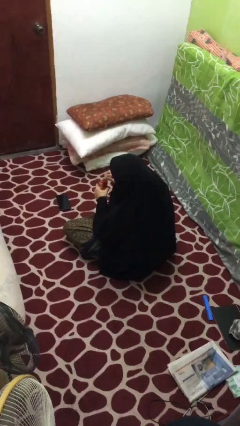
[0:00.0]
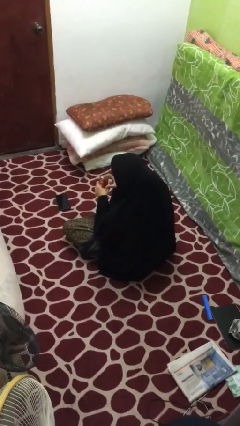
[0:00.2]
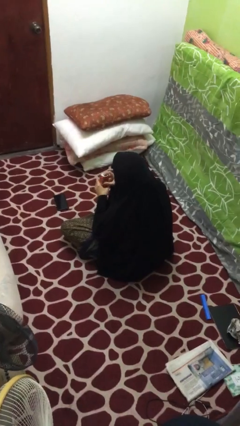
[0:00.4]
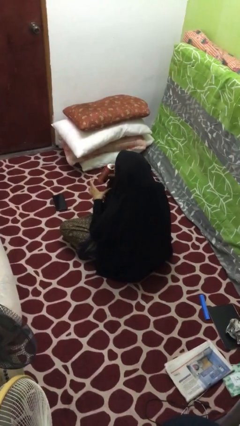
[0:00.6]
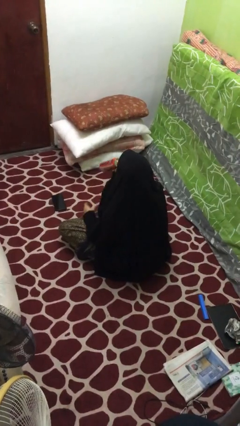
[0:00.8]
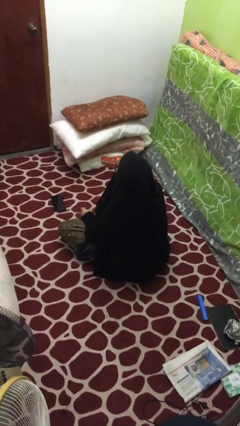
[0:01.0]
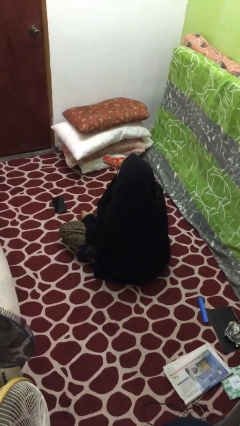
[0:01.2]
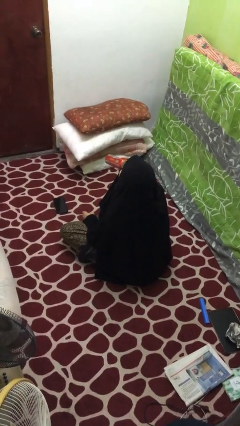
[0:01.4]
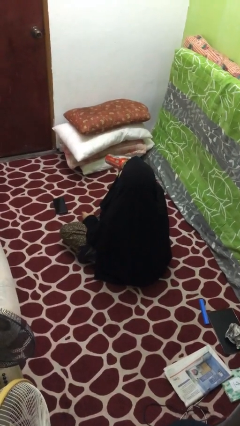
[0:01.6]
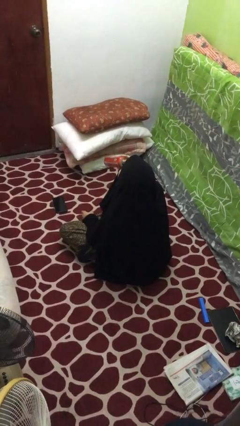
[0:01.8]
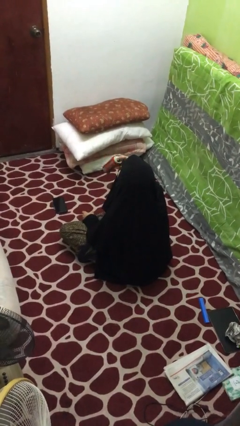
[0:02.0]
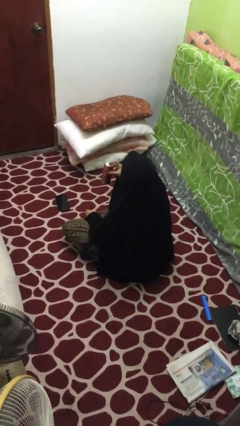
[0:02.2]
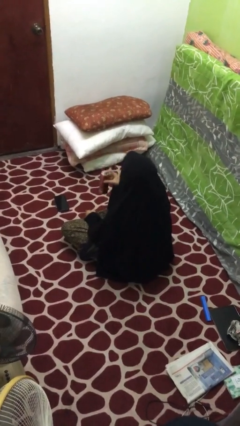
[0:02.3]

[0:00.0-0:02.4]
person drinks from beverage can

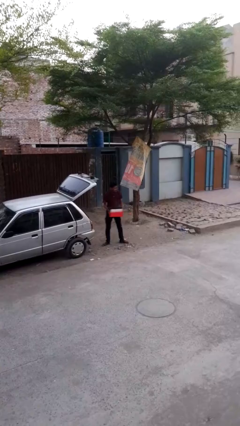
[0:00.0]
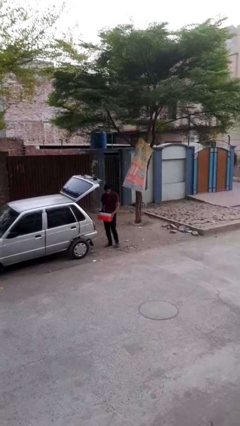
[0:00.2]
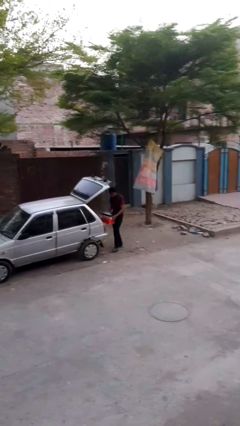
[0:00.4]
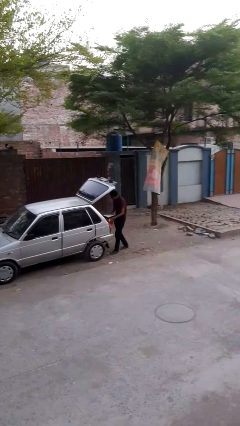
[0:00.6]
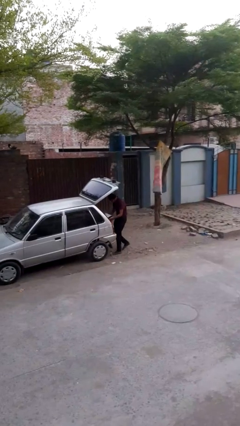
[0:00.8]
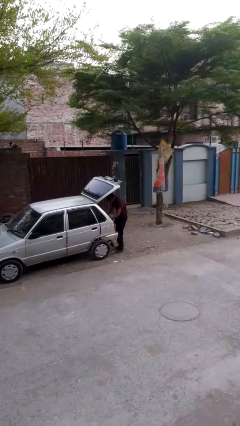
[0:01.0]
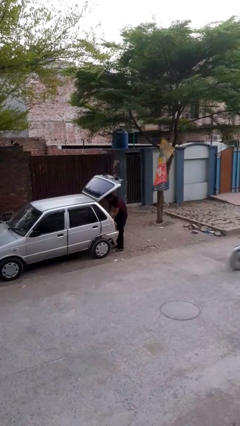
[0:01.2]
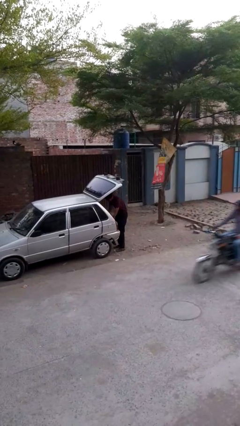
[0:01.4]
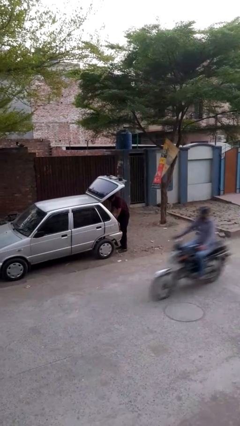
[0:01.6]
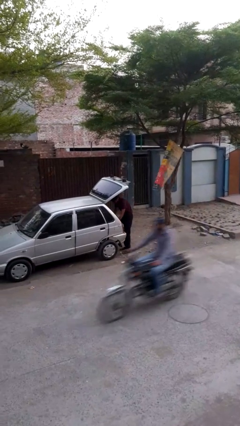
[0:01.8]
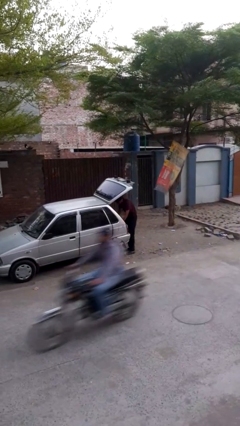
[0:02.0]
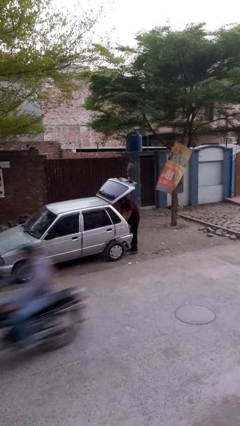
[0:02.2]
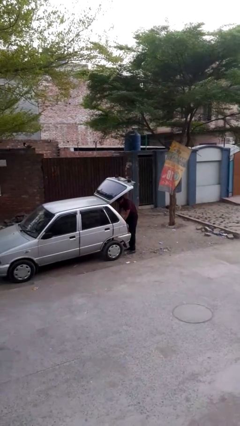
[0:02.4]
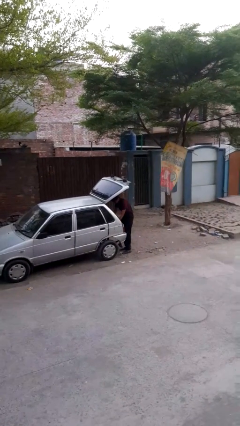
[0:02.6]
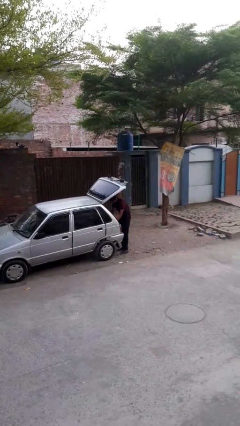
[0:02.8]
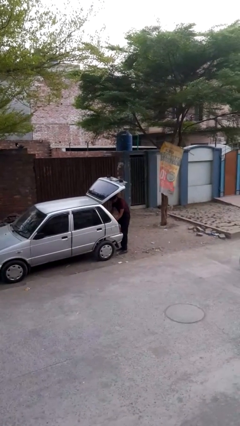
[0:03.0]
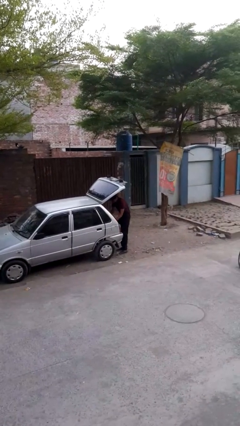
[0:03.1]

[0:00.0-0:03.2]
person loads car

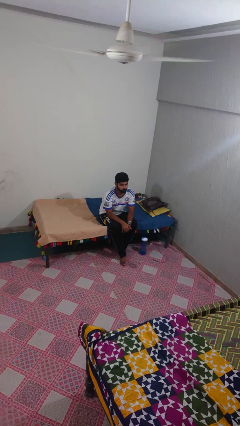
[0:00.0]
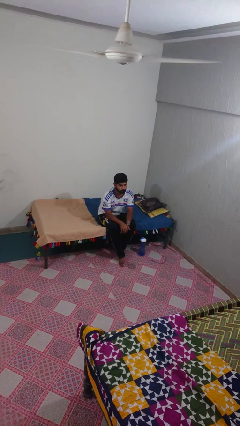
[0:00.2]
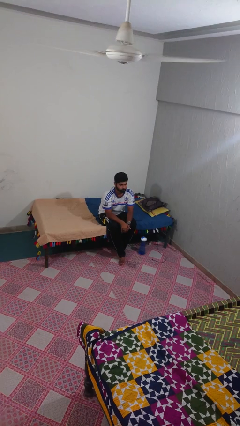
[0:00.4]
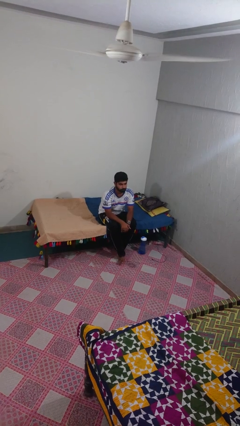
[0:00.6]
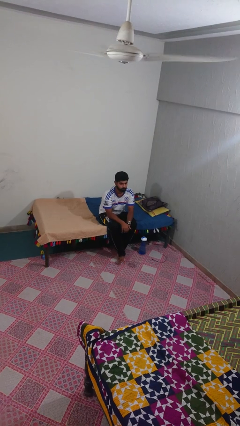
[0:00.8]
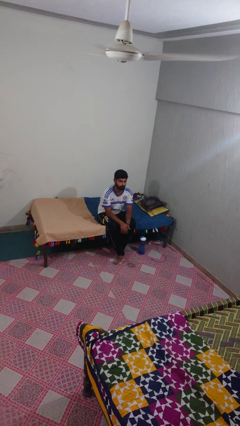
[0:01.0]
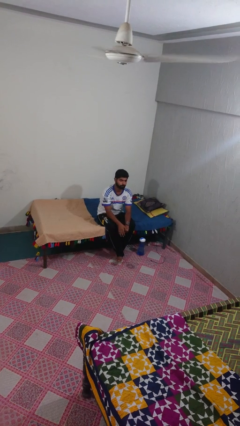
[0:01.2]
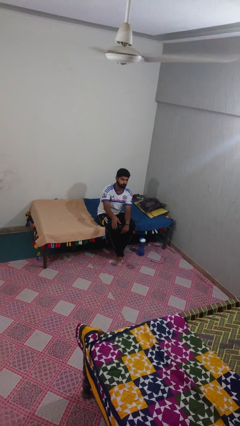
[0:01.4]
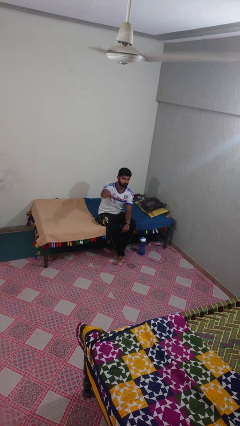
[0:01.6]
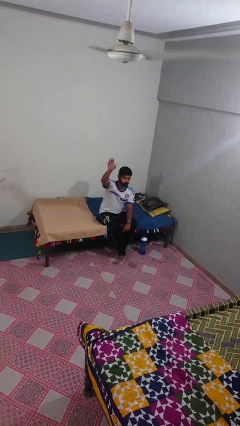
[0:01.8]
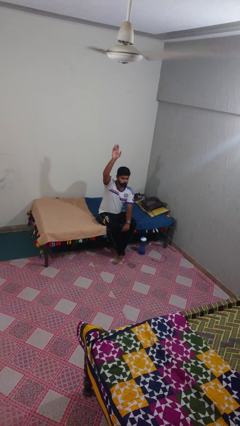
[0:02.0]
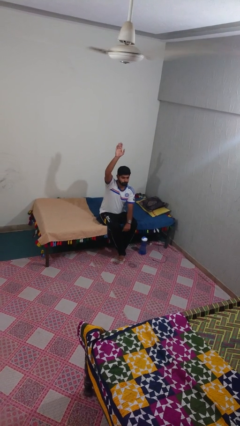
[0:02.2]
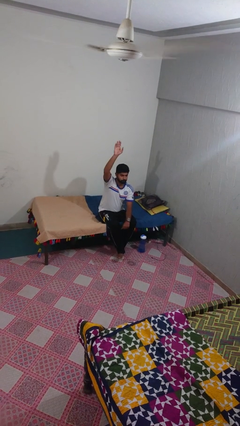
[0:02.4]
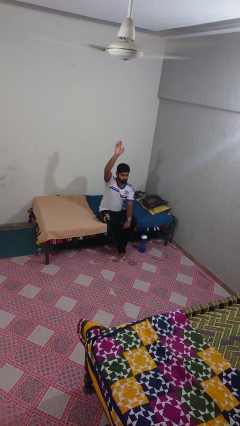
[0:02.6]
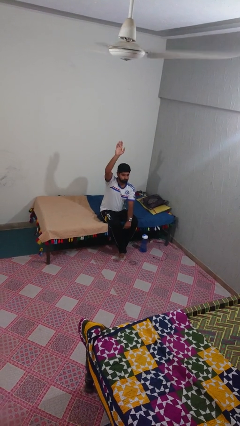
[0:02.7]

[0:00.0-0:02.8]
person gestures raise hand

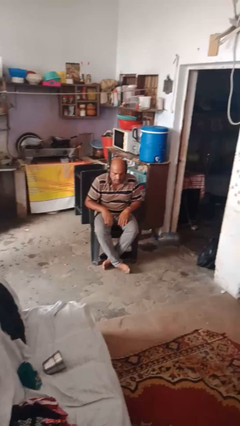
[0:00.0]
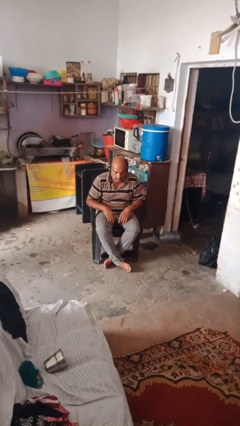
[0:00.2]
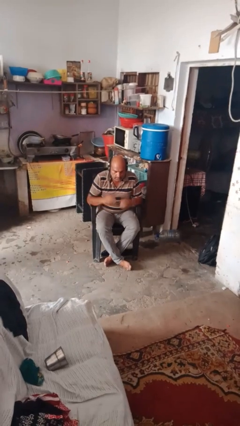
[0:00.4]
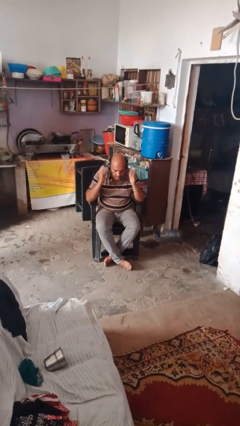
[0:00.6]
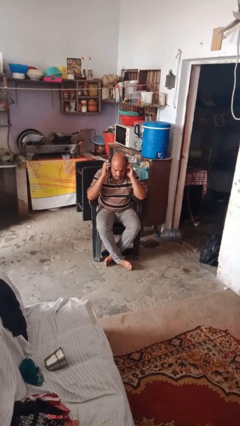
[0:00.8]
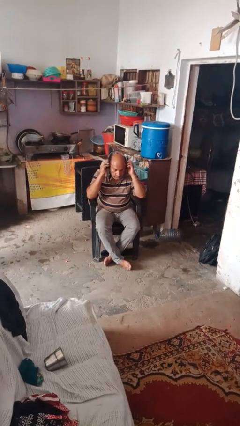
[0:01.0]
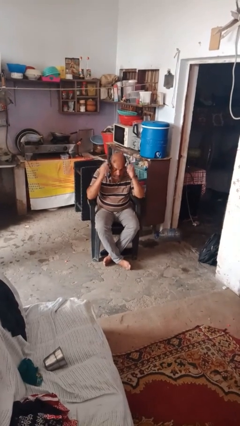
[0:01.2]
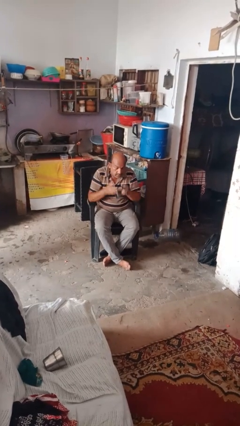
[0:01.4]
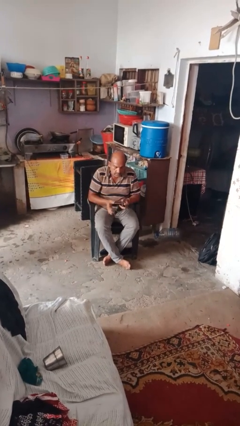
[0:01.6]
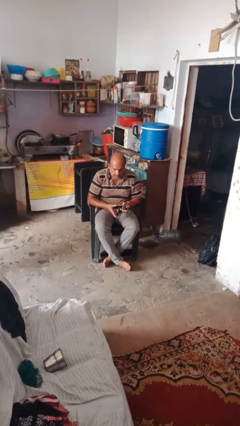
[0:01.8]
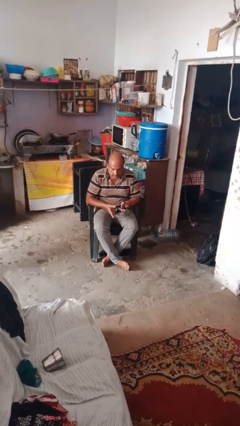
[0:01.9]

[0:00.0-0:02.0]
person takes off headphones

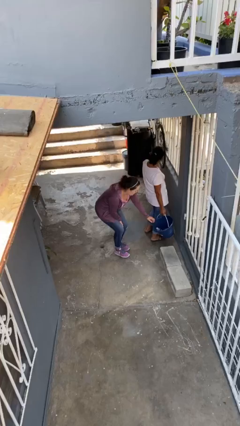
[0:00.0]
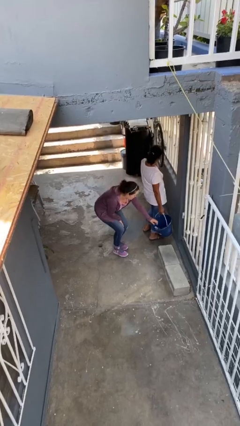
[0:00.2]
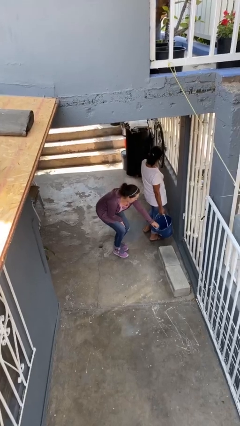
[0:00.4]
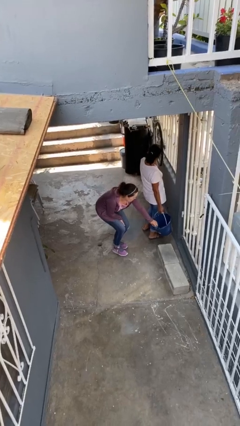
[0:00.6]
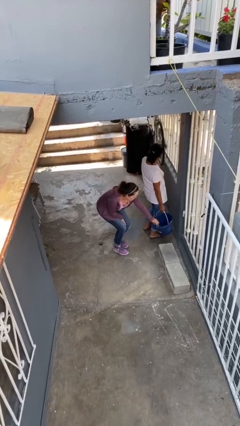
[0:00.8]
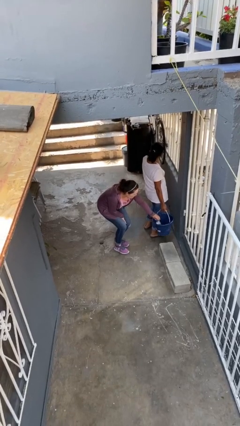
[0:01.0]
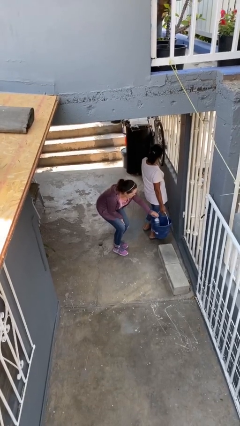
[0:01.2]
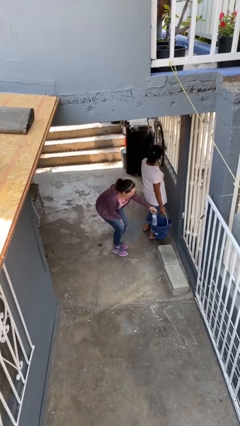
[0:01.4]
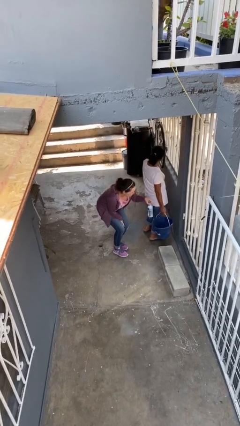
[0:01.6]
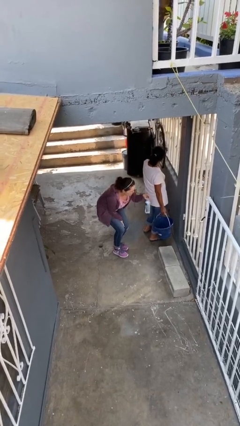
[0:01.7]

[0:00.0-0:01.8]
person steals object from person

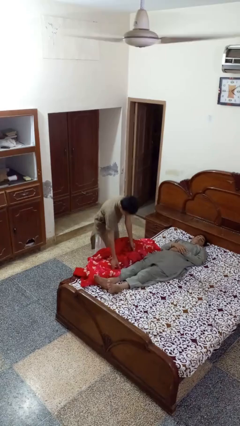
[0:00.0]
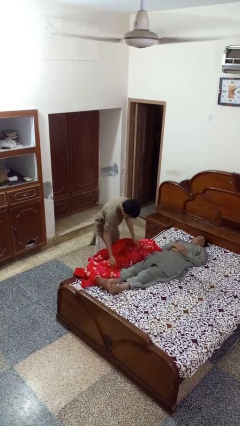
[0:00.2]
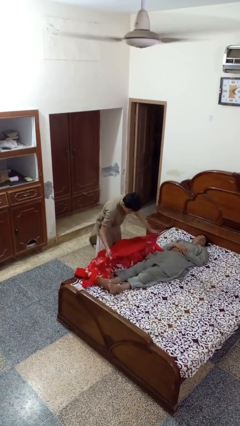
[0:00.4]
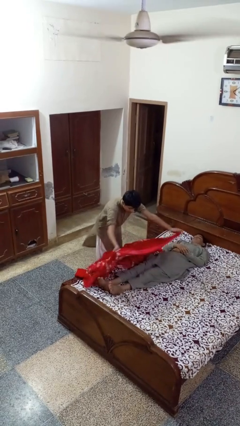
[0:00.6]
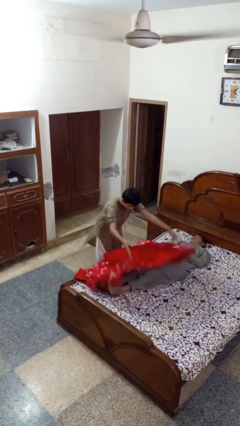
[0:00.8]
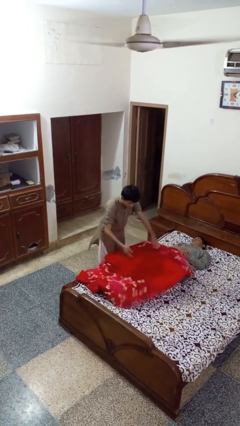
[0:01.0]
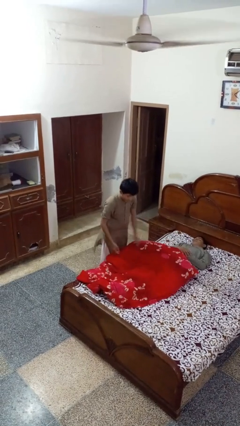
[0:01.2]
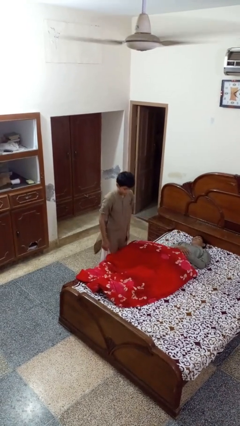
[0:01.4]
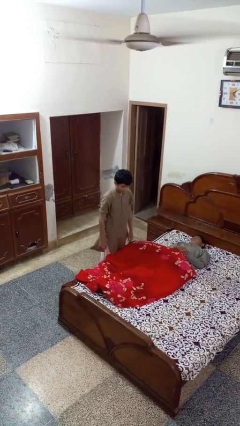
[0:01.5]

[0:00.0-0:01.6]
person covers friend with blanket

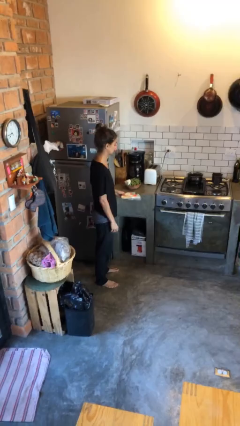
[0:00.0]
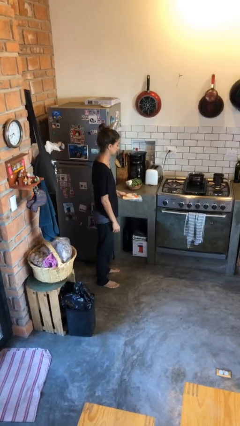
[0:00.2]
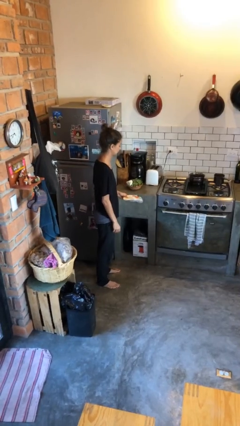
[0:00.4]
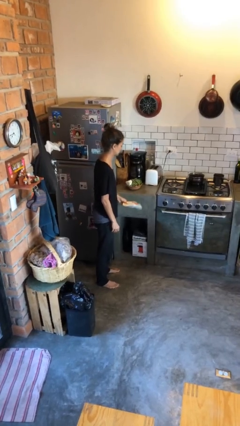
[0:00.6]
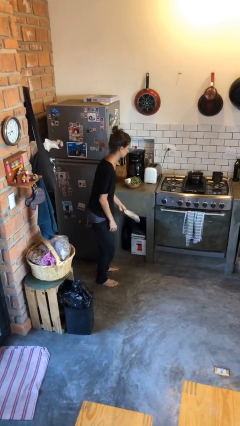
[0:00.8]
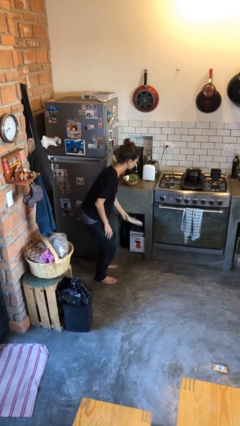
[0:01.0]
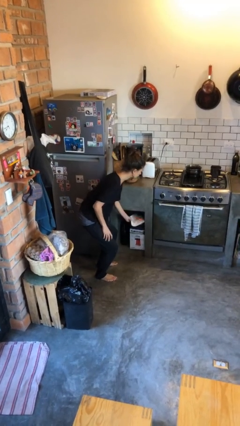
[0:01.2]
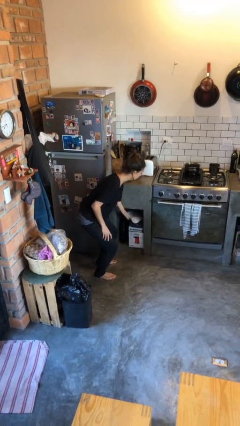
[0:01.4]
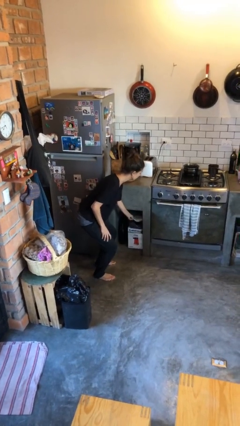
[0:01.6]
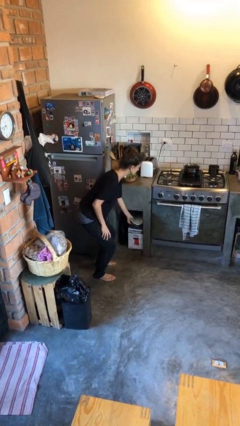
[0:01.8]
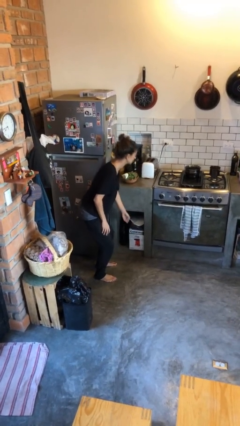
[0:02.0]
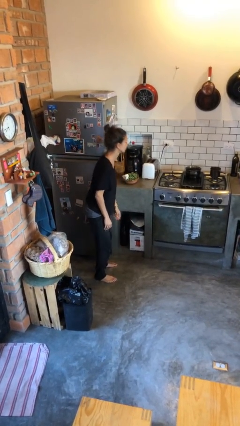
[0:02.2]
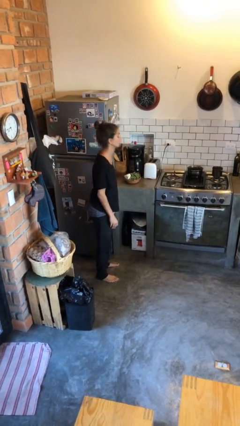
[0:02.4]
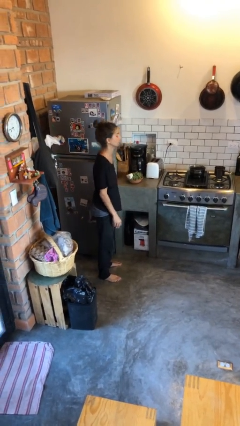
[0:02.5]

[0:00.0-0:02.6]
person puts down object into cabinet

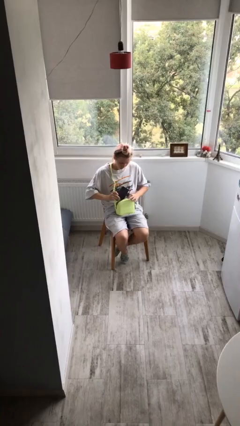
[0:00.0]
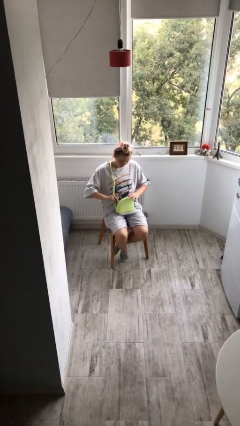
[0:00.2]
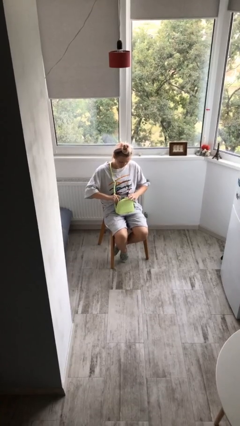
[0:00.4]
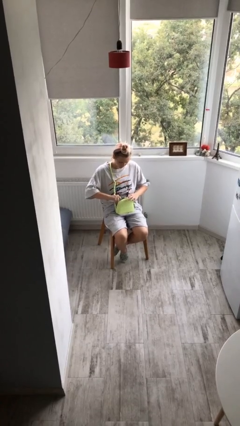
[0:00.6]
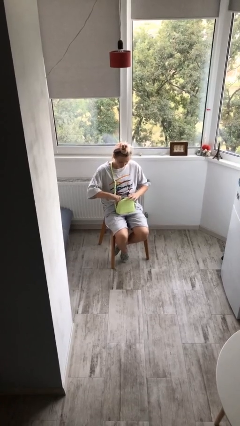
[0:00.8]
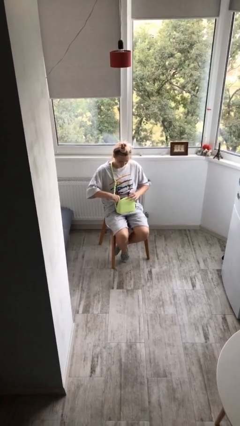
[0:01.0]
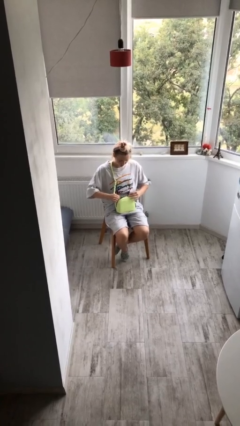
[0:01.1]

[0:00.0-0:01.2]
person puts object into purse
